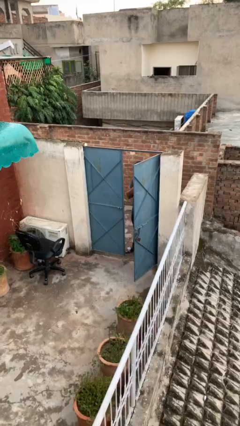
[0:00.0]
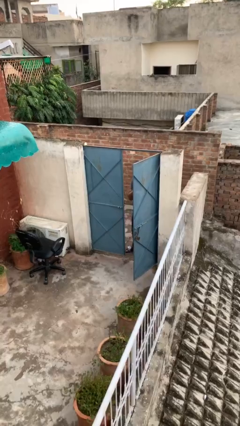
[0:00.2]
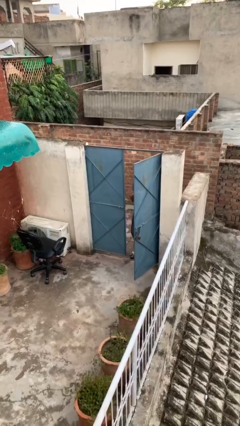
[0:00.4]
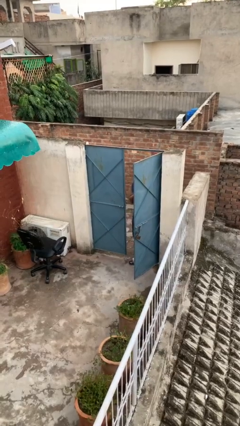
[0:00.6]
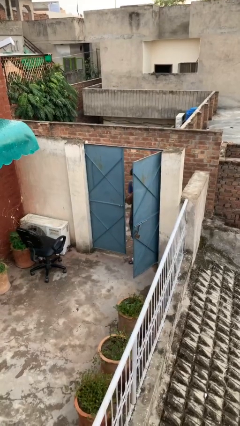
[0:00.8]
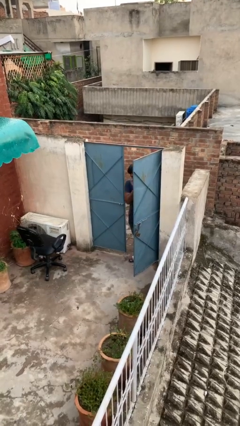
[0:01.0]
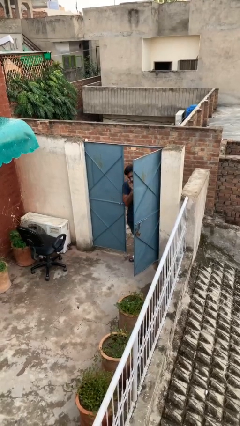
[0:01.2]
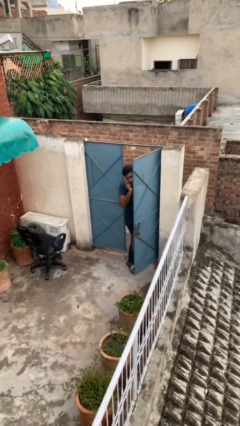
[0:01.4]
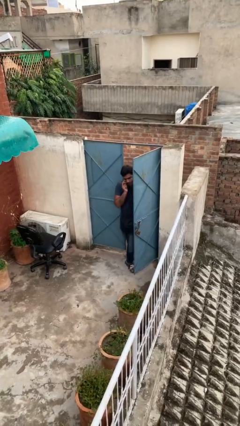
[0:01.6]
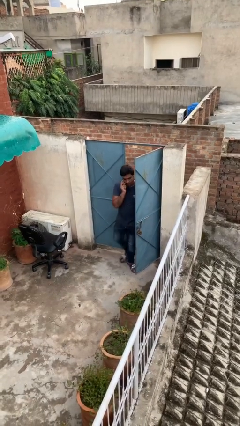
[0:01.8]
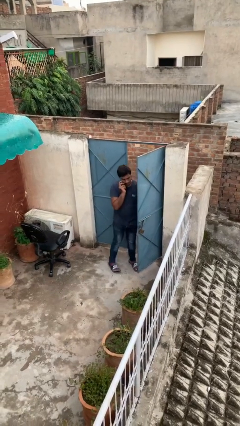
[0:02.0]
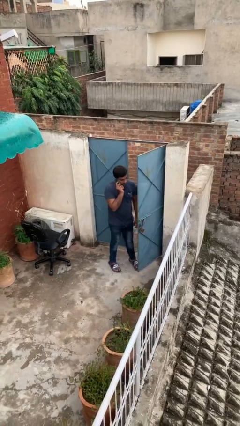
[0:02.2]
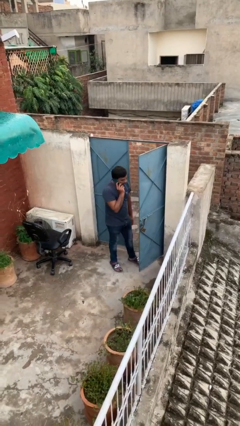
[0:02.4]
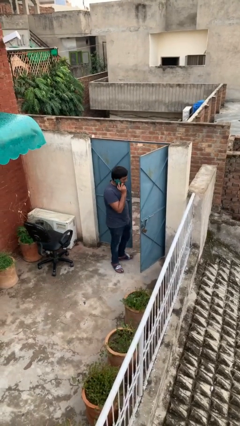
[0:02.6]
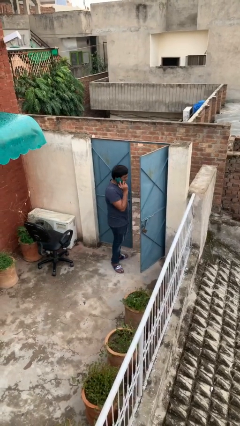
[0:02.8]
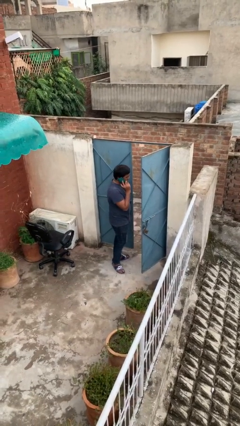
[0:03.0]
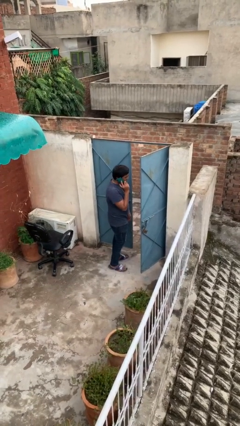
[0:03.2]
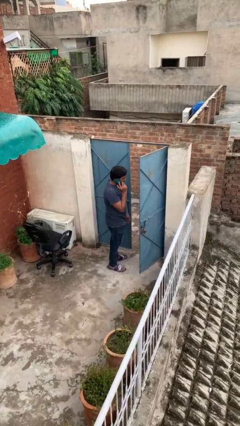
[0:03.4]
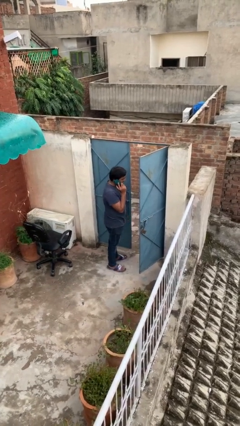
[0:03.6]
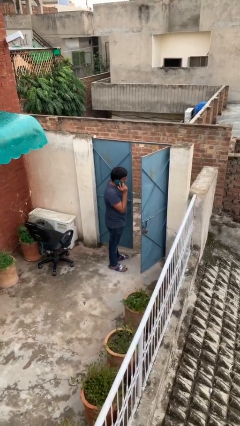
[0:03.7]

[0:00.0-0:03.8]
person enters scene through structure

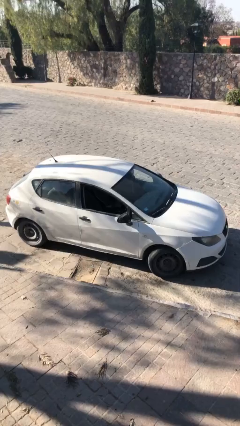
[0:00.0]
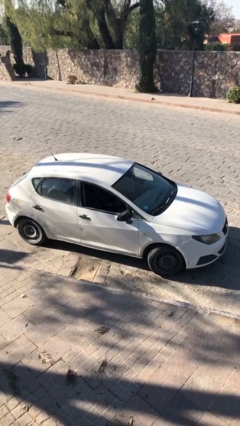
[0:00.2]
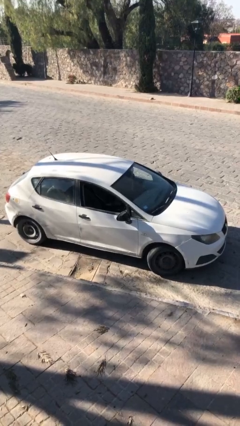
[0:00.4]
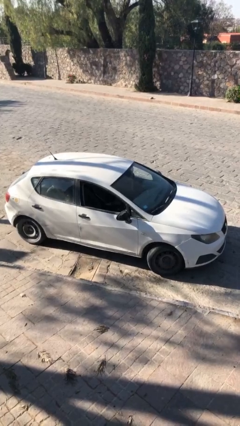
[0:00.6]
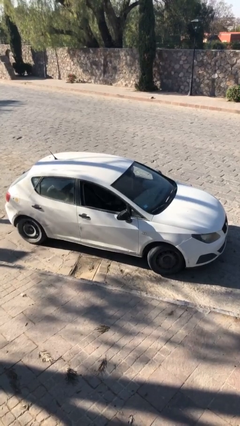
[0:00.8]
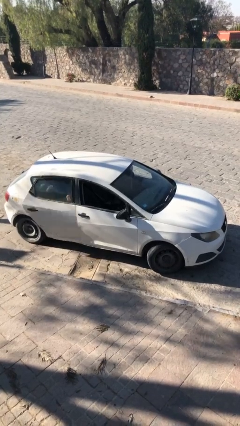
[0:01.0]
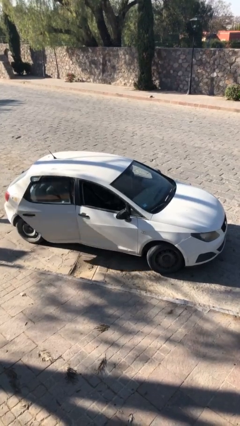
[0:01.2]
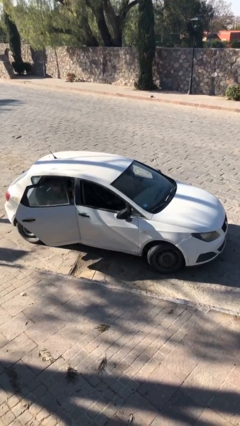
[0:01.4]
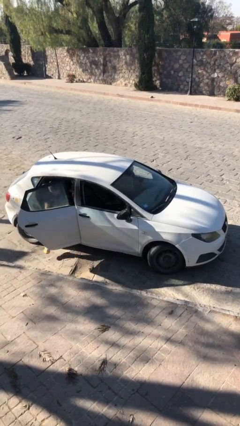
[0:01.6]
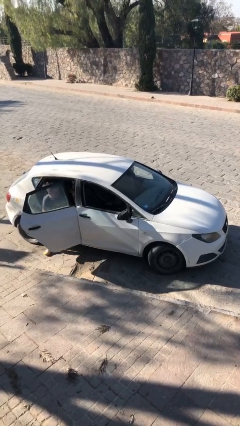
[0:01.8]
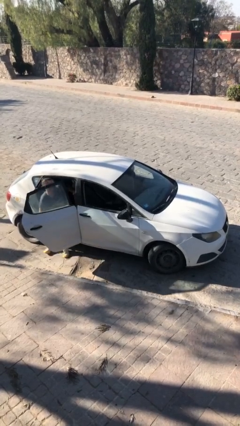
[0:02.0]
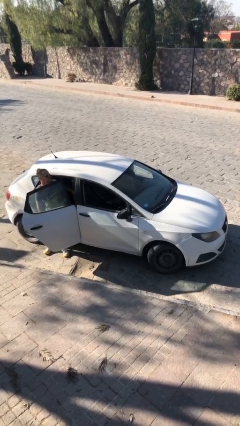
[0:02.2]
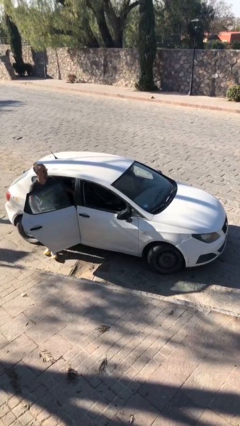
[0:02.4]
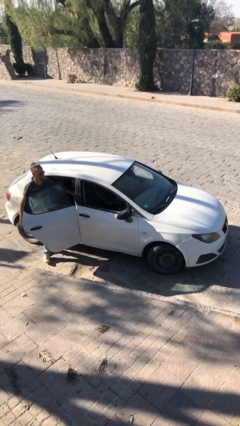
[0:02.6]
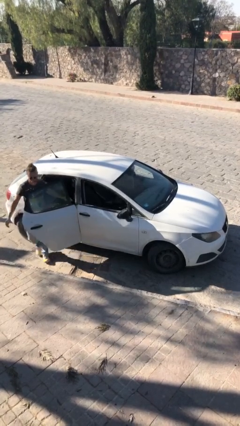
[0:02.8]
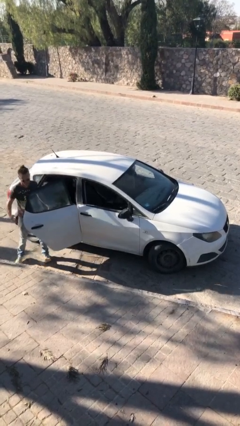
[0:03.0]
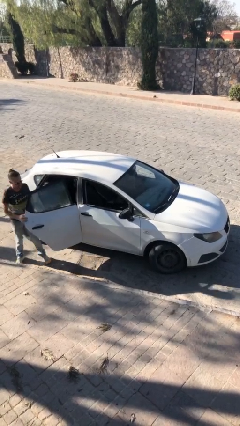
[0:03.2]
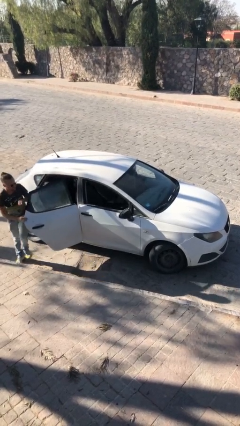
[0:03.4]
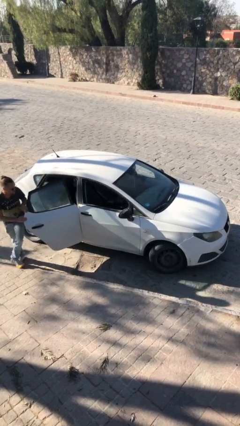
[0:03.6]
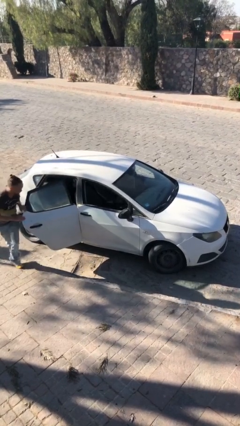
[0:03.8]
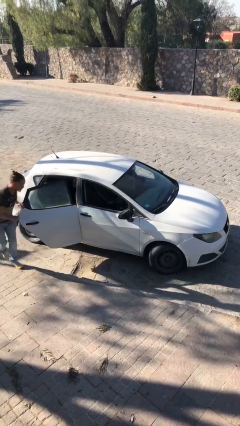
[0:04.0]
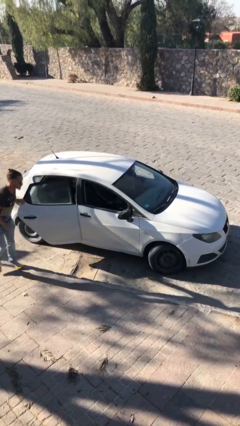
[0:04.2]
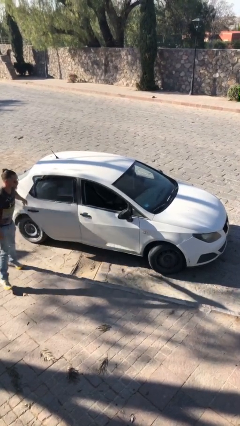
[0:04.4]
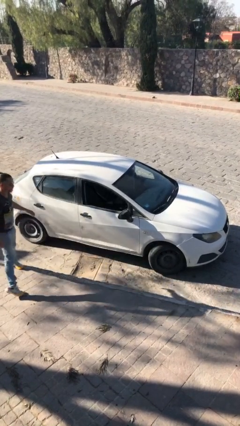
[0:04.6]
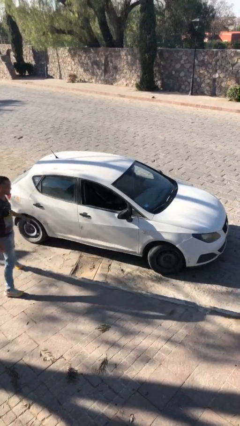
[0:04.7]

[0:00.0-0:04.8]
car drops off person

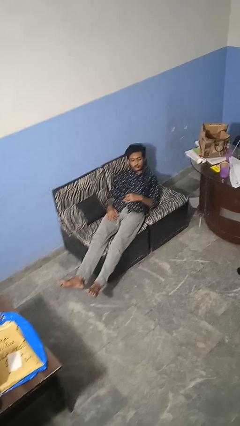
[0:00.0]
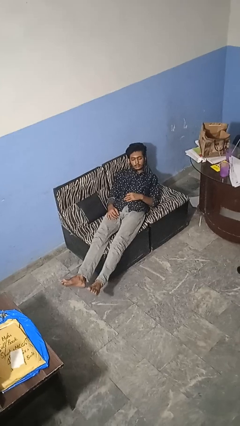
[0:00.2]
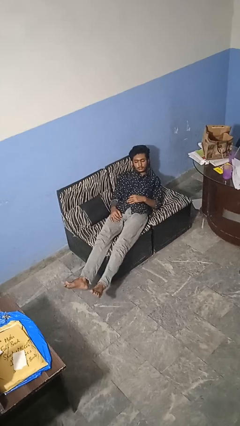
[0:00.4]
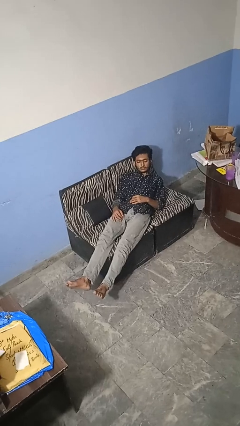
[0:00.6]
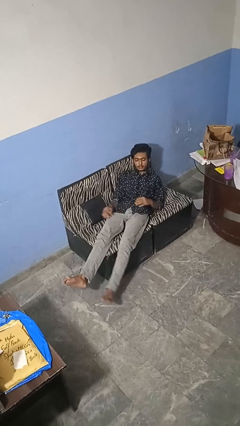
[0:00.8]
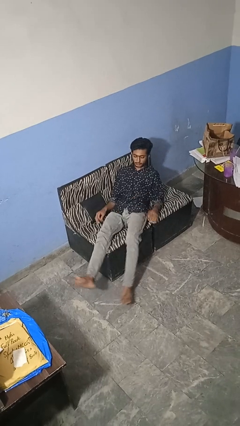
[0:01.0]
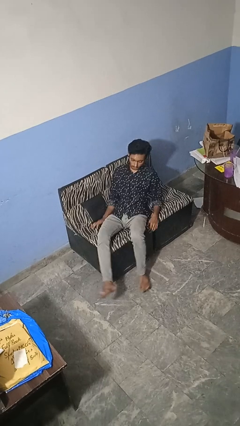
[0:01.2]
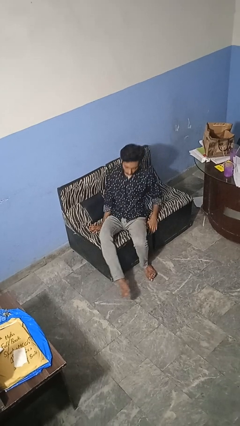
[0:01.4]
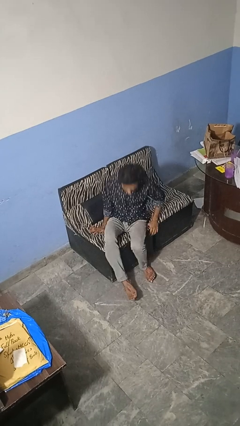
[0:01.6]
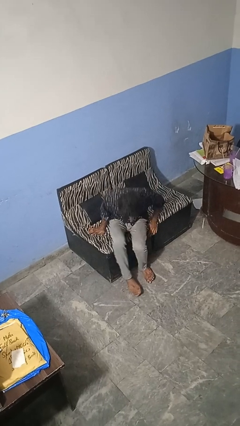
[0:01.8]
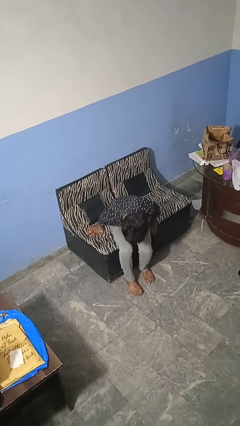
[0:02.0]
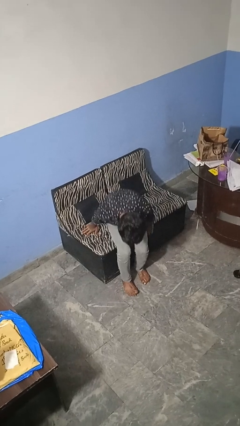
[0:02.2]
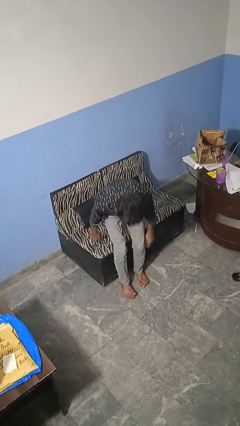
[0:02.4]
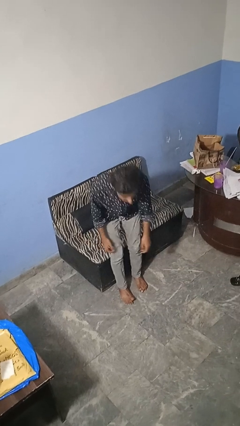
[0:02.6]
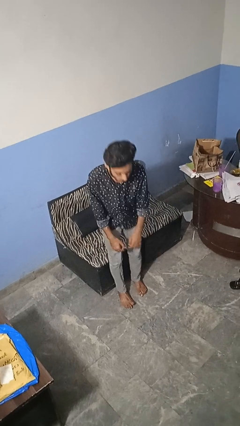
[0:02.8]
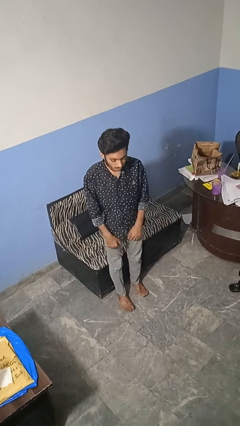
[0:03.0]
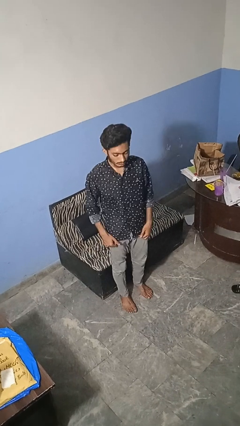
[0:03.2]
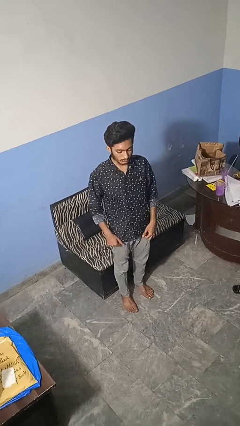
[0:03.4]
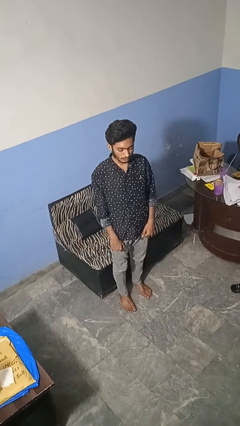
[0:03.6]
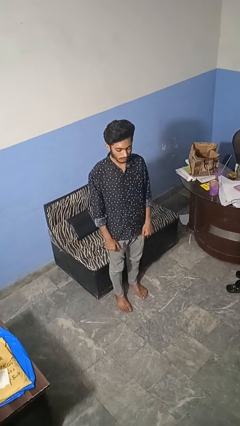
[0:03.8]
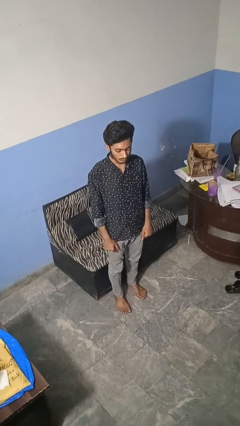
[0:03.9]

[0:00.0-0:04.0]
person stands up

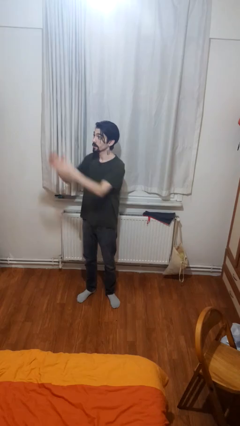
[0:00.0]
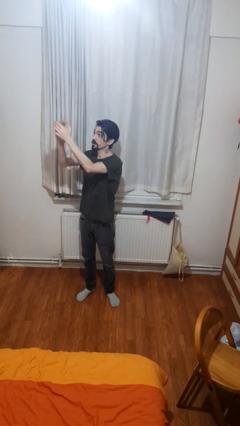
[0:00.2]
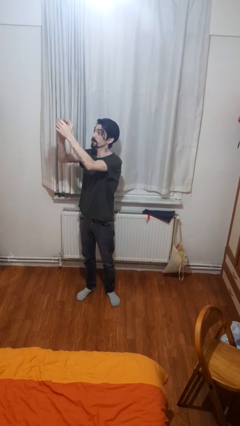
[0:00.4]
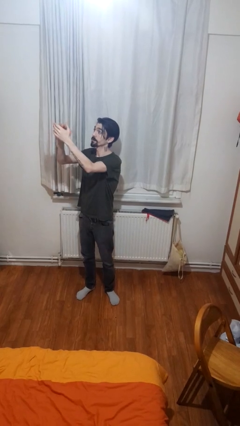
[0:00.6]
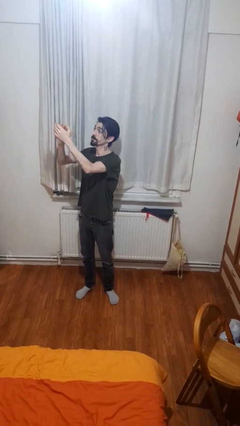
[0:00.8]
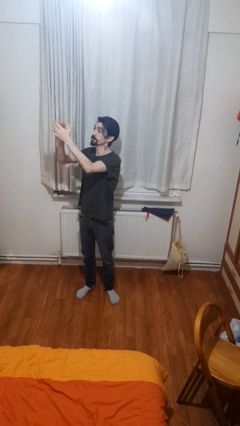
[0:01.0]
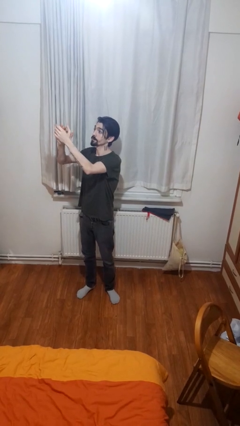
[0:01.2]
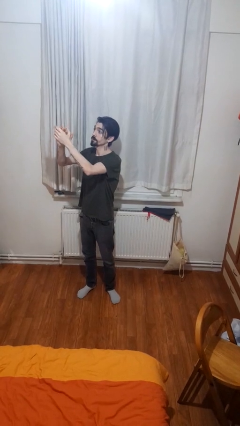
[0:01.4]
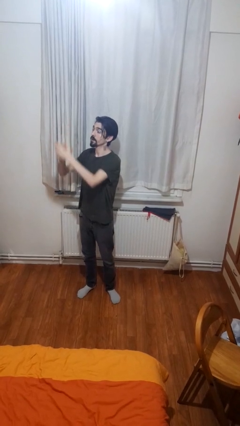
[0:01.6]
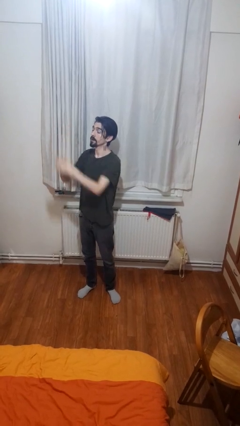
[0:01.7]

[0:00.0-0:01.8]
person claps hands

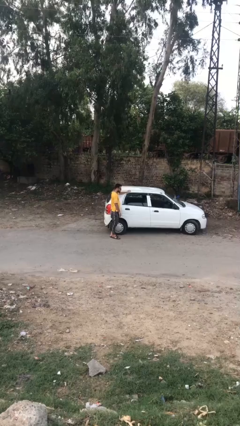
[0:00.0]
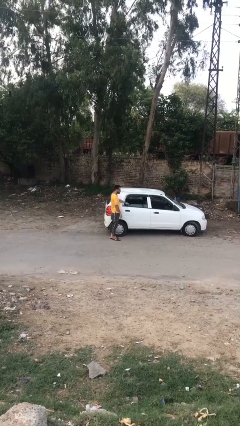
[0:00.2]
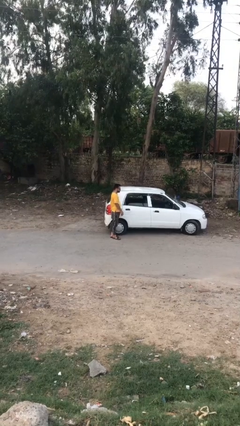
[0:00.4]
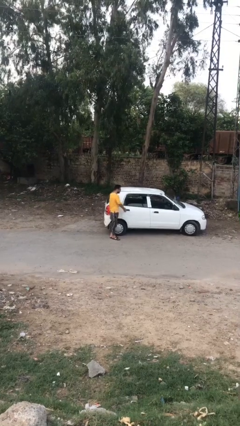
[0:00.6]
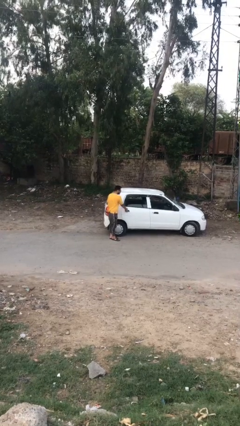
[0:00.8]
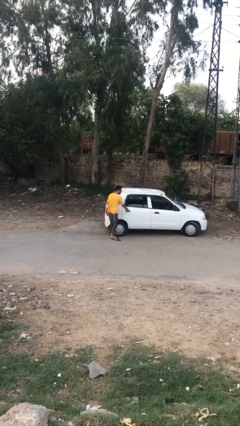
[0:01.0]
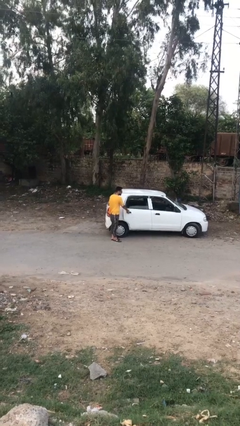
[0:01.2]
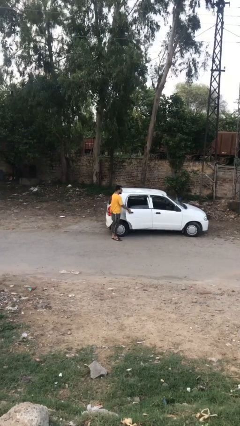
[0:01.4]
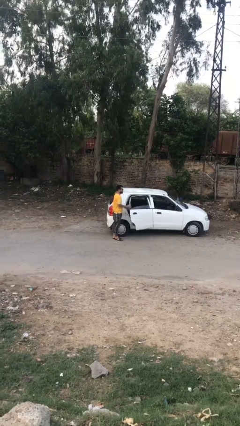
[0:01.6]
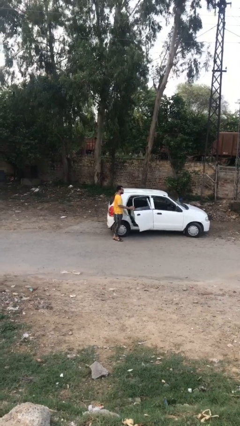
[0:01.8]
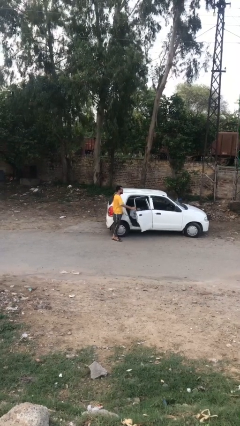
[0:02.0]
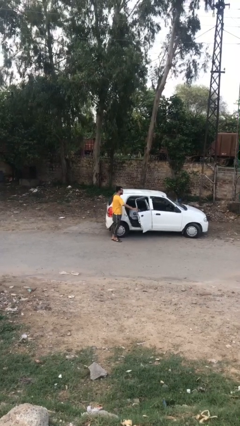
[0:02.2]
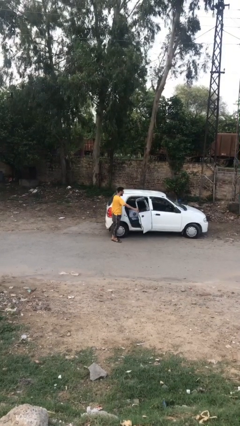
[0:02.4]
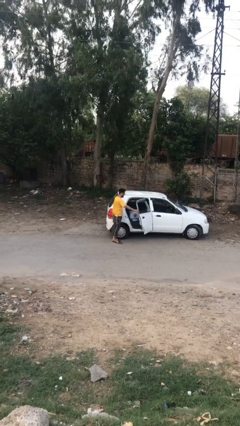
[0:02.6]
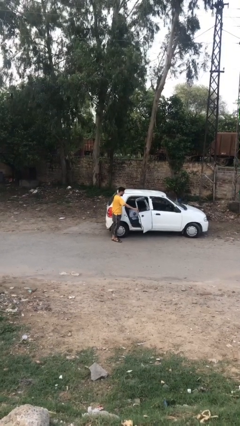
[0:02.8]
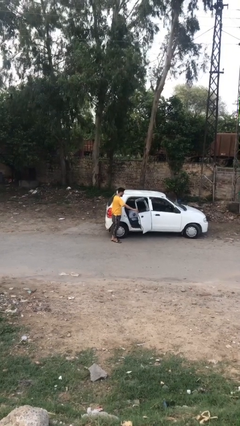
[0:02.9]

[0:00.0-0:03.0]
person opens car door

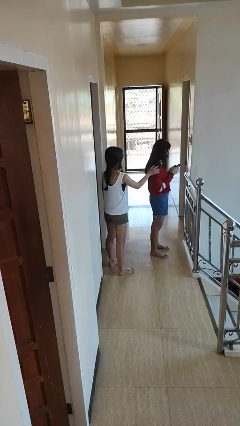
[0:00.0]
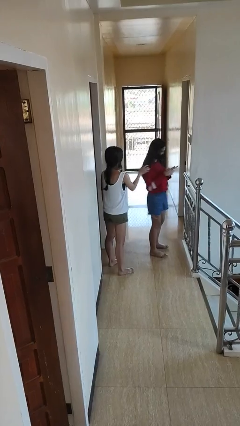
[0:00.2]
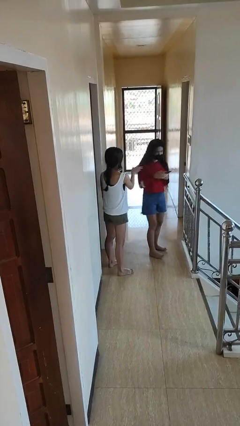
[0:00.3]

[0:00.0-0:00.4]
person grabs person by shoulder
